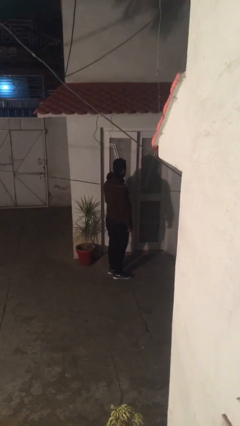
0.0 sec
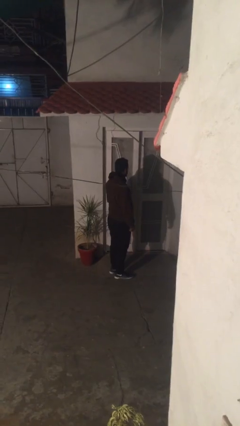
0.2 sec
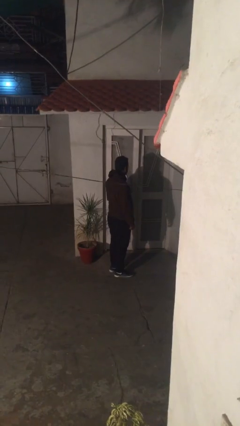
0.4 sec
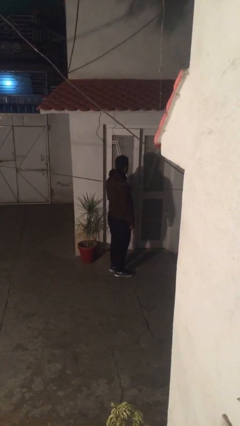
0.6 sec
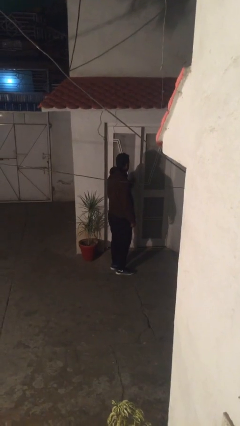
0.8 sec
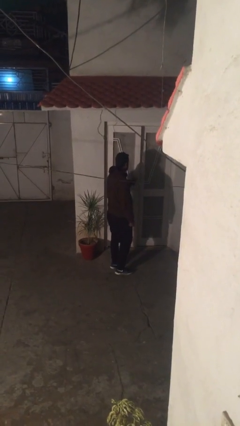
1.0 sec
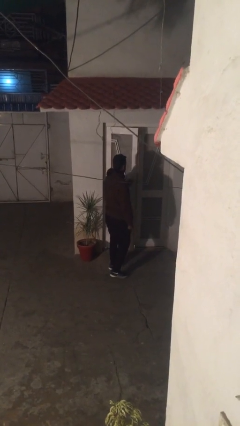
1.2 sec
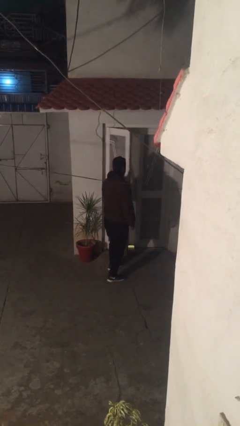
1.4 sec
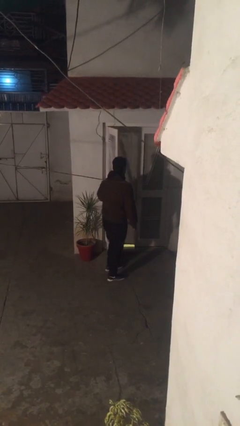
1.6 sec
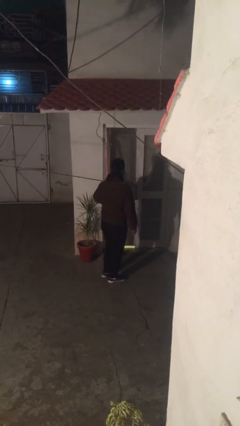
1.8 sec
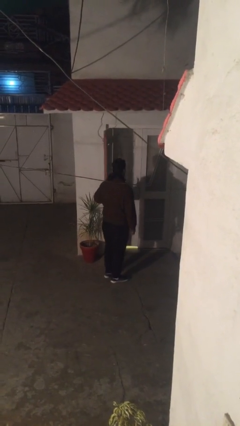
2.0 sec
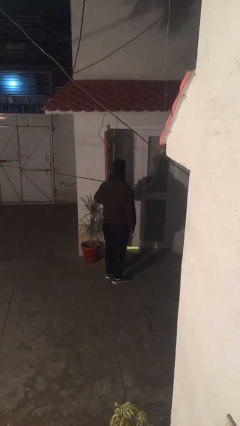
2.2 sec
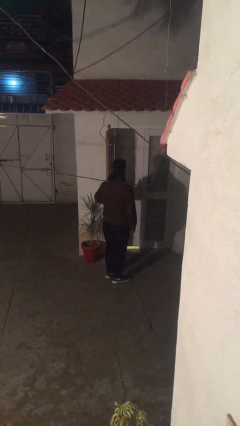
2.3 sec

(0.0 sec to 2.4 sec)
person opens facility door

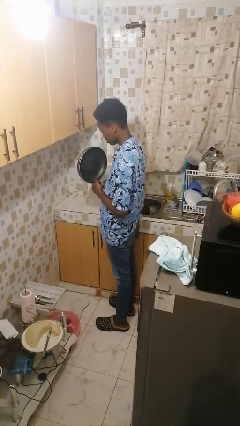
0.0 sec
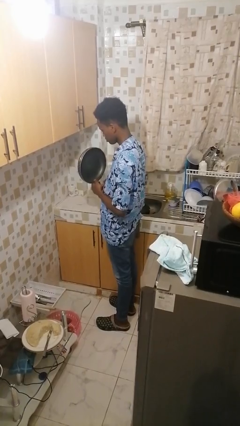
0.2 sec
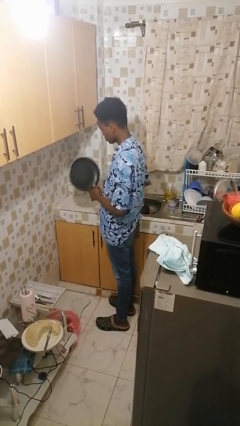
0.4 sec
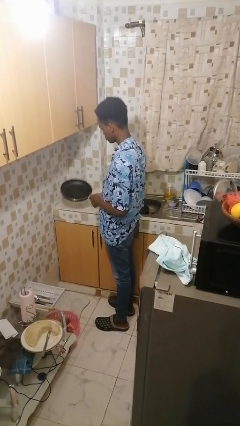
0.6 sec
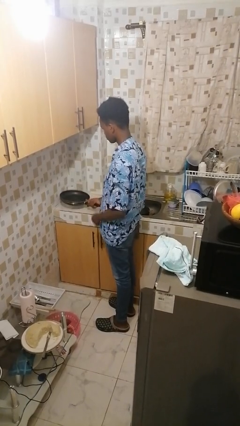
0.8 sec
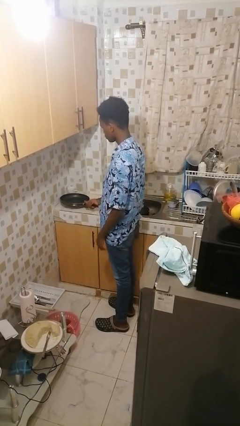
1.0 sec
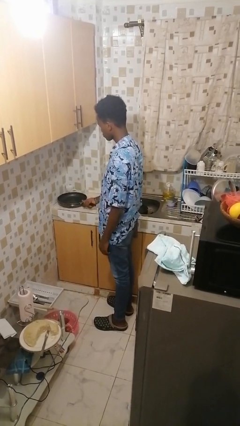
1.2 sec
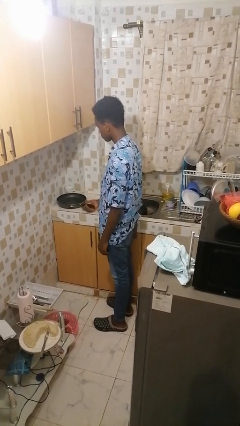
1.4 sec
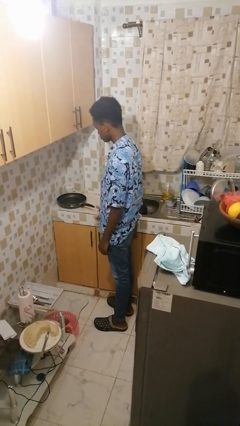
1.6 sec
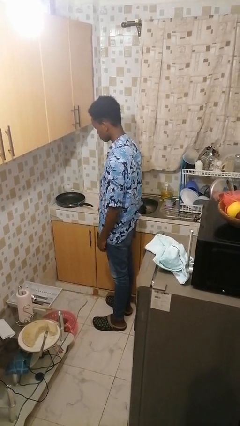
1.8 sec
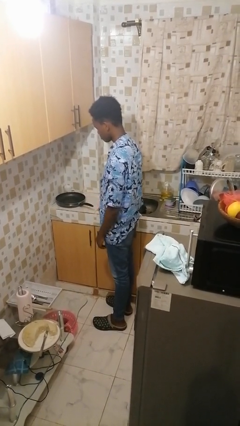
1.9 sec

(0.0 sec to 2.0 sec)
person puts down object on countertop

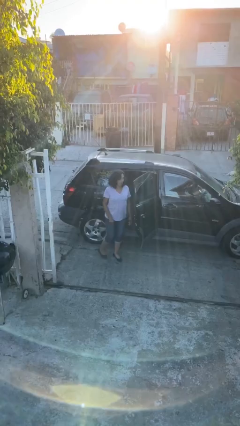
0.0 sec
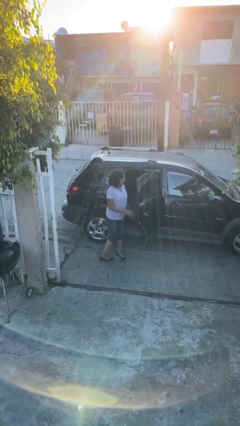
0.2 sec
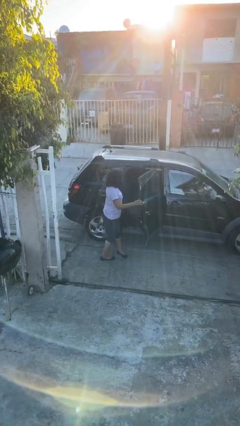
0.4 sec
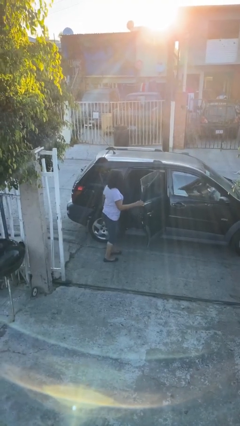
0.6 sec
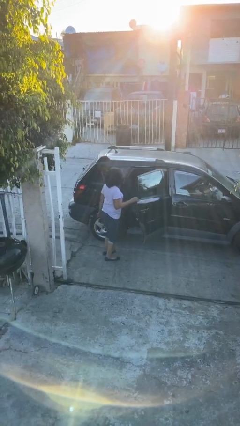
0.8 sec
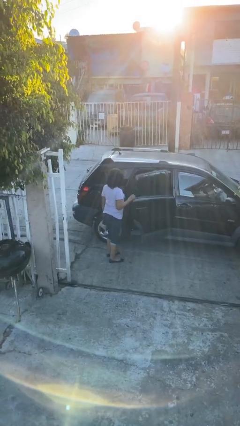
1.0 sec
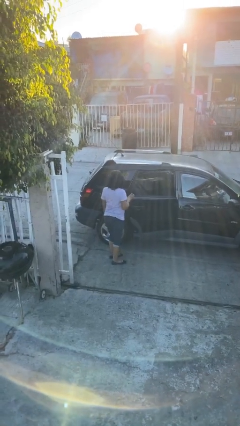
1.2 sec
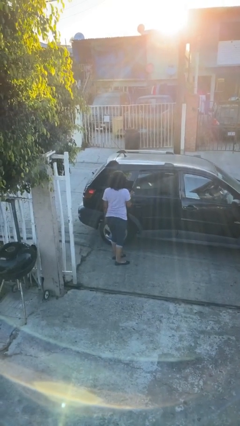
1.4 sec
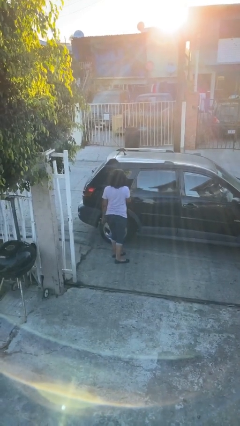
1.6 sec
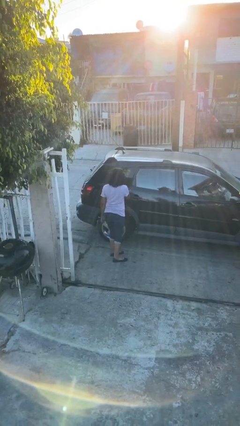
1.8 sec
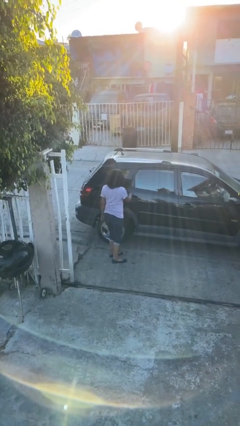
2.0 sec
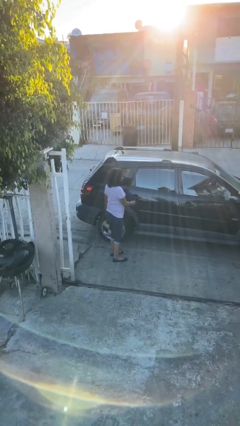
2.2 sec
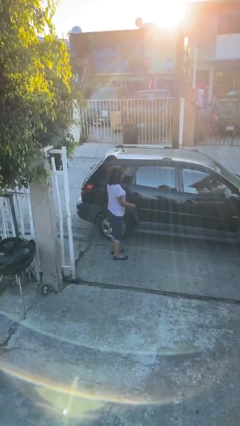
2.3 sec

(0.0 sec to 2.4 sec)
person closes car door

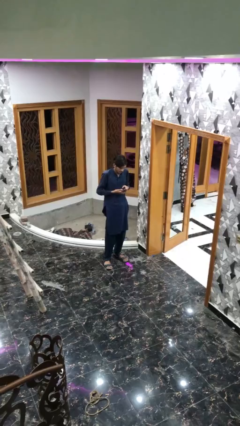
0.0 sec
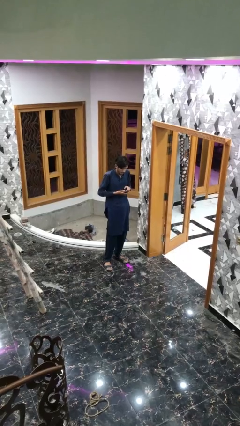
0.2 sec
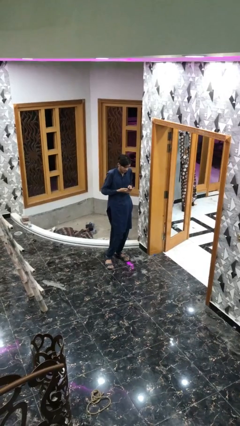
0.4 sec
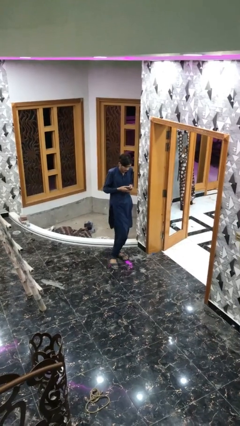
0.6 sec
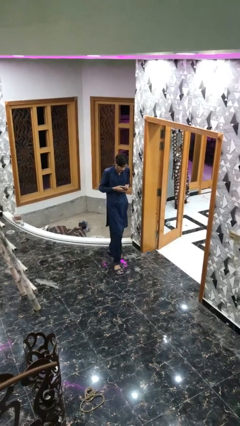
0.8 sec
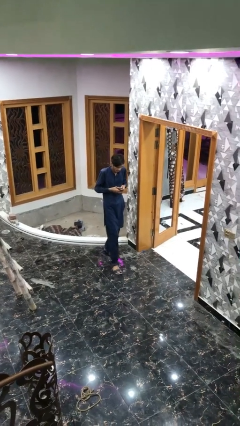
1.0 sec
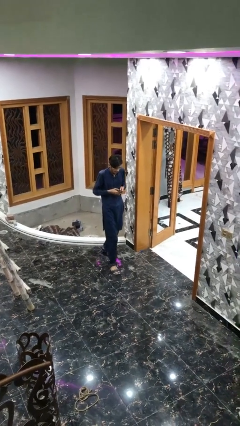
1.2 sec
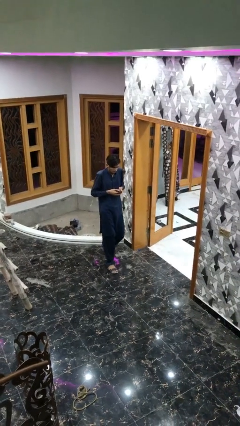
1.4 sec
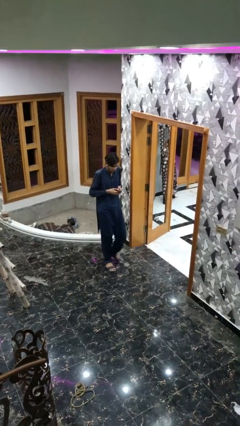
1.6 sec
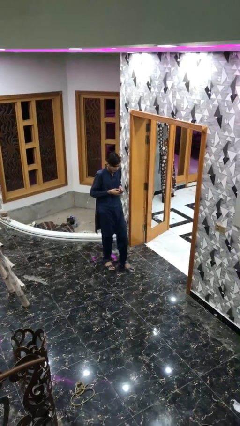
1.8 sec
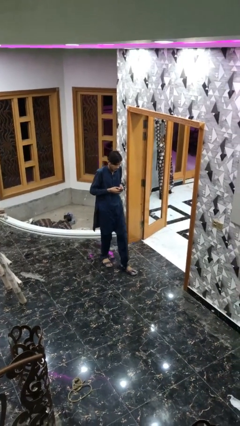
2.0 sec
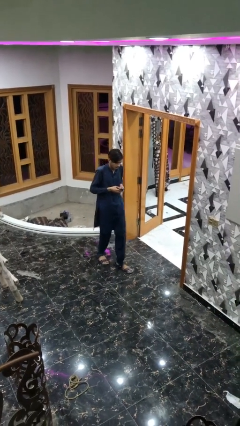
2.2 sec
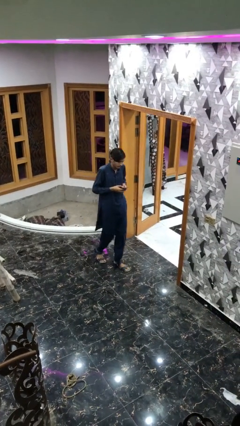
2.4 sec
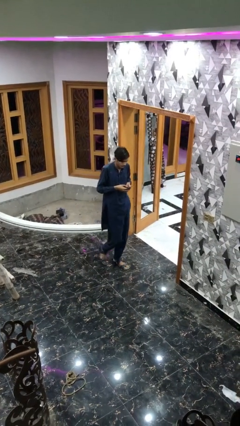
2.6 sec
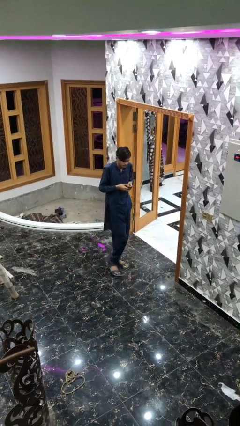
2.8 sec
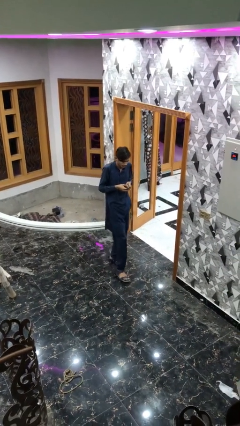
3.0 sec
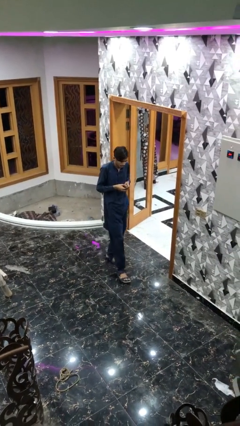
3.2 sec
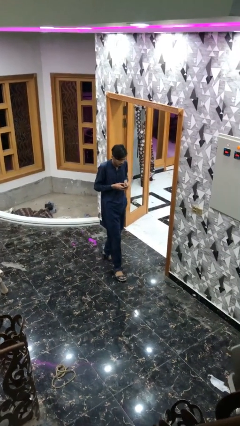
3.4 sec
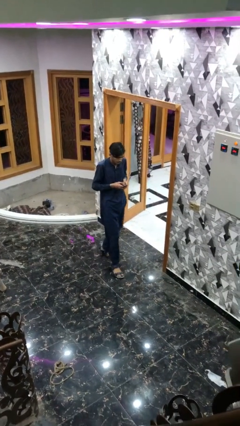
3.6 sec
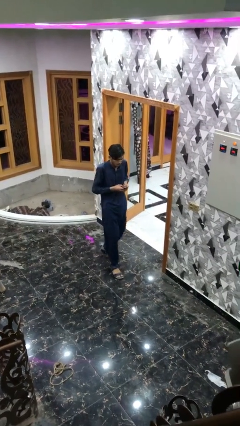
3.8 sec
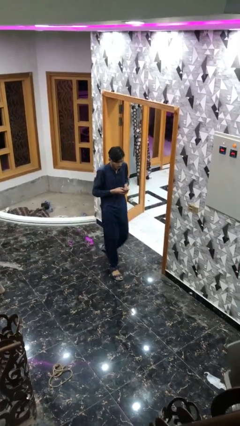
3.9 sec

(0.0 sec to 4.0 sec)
person texts on phone

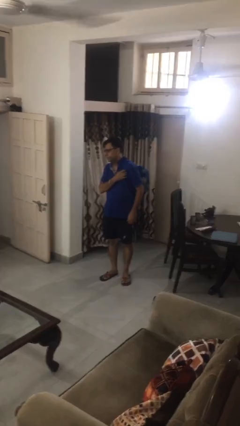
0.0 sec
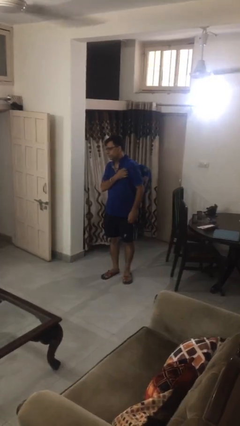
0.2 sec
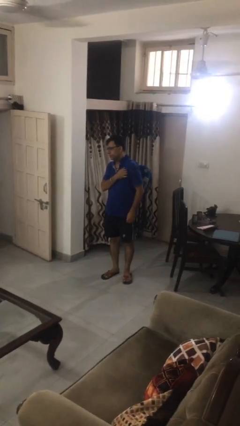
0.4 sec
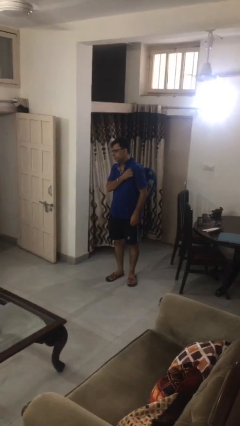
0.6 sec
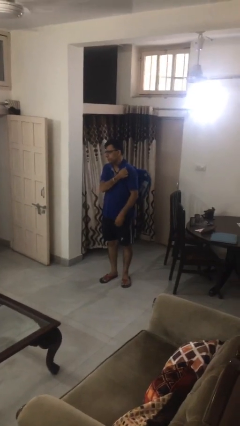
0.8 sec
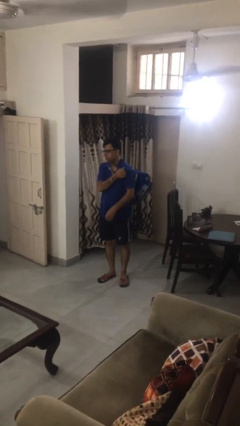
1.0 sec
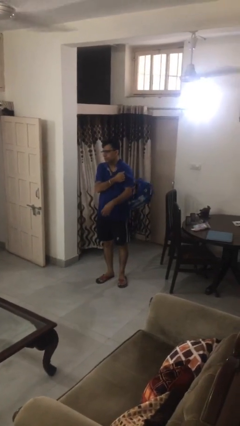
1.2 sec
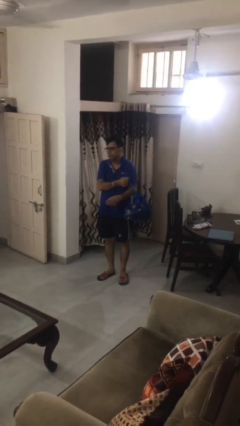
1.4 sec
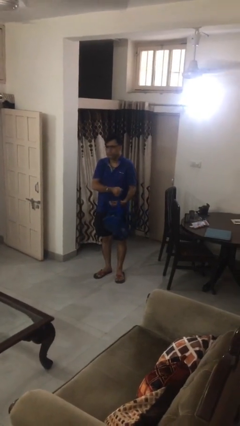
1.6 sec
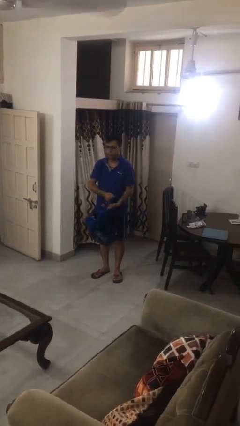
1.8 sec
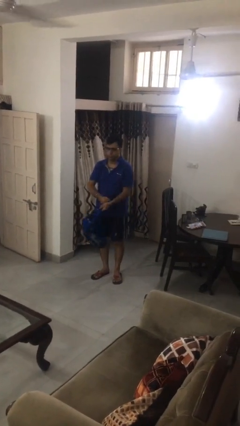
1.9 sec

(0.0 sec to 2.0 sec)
person takes off backpack

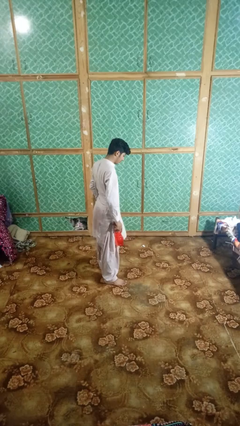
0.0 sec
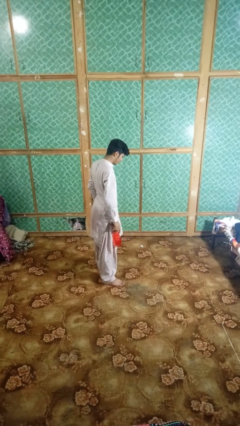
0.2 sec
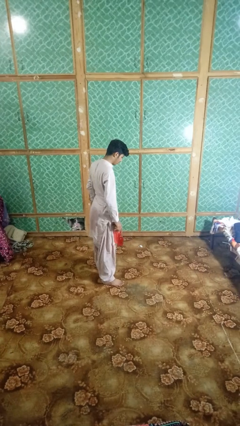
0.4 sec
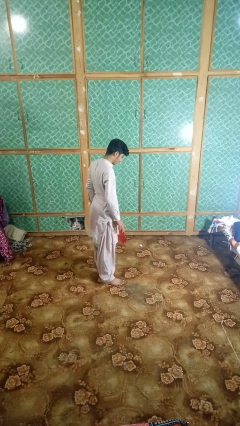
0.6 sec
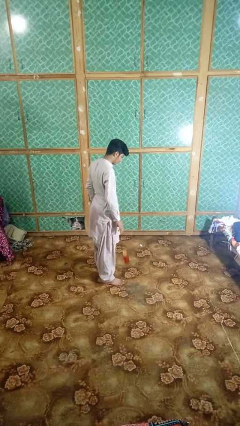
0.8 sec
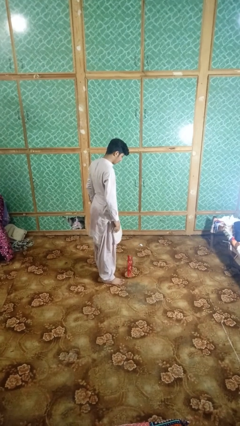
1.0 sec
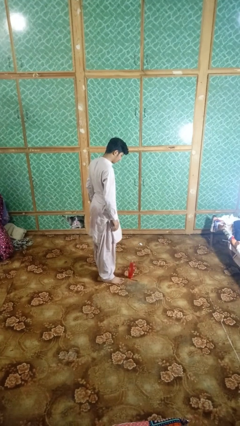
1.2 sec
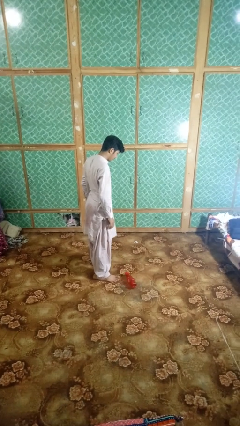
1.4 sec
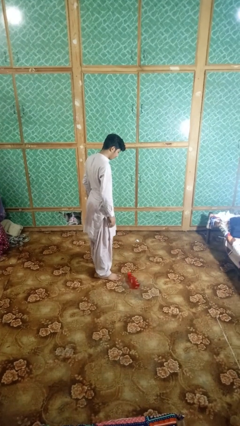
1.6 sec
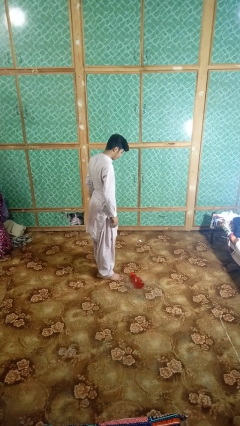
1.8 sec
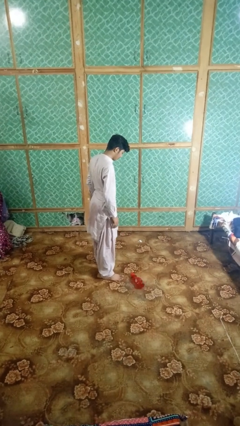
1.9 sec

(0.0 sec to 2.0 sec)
person drops object

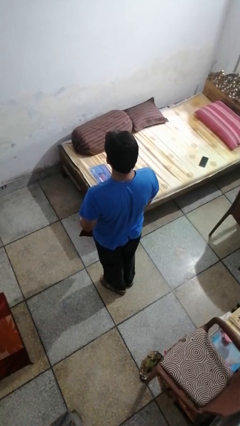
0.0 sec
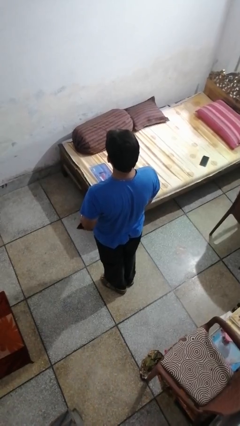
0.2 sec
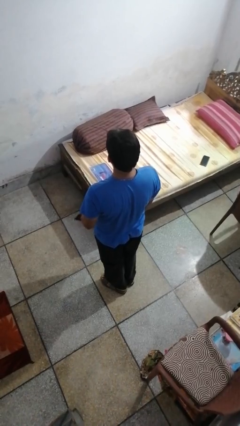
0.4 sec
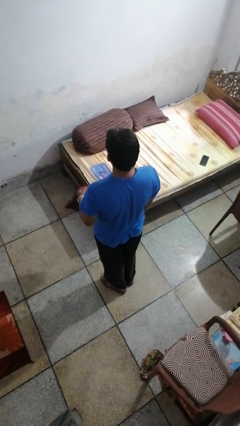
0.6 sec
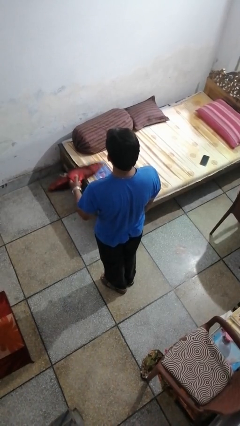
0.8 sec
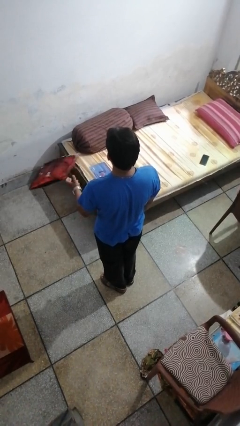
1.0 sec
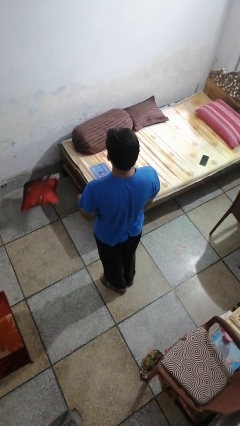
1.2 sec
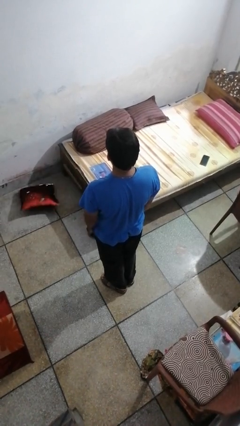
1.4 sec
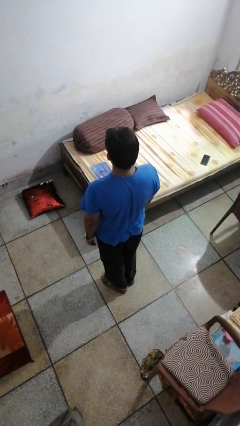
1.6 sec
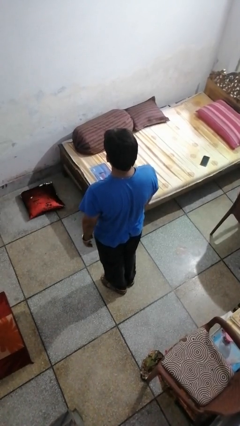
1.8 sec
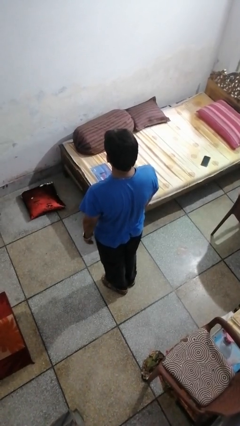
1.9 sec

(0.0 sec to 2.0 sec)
person throws object to ground

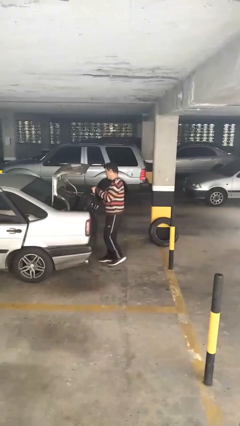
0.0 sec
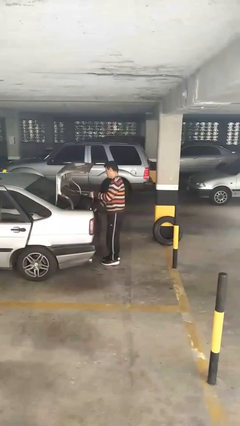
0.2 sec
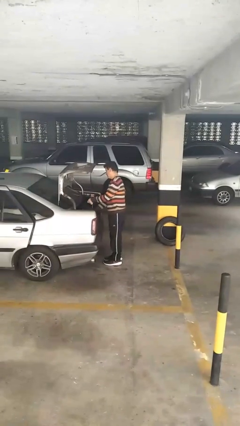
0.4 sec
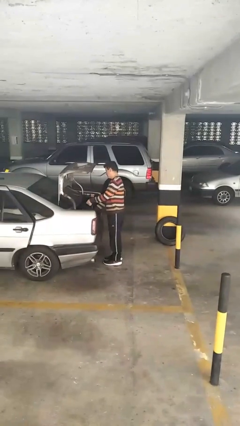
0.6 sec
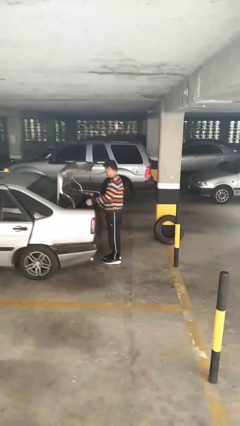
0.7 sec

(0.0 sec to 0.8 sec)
person loads car
